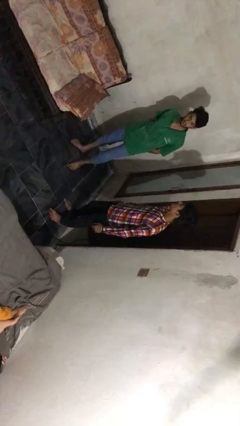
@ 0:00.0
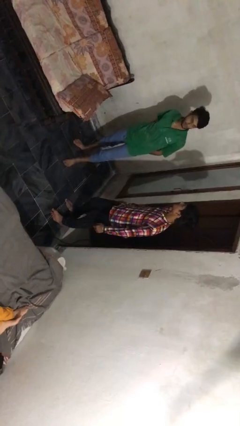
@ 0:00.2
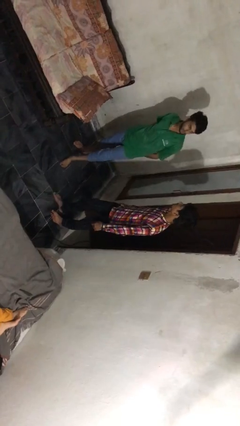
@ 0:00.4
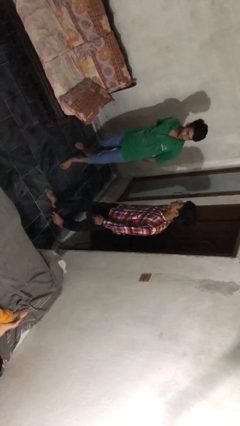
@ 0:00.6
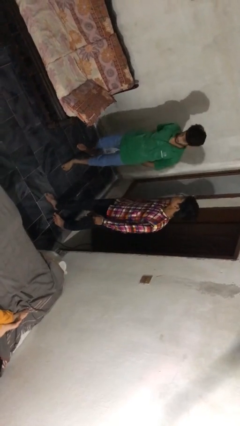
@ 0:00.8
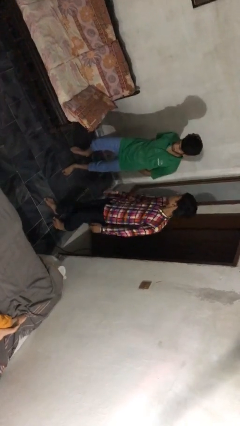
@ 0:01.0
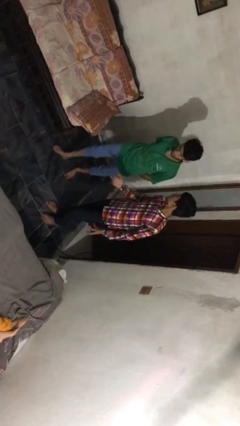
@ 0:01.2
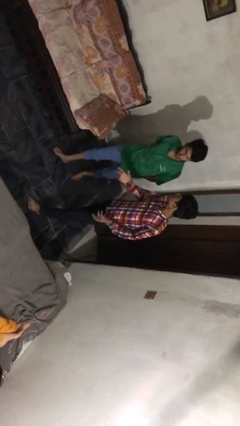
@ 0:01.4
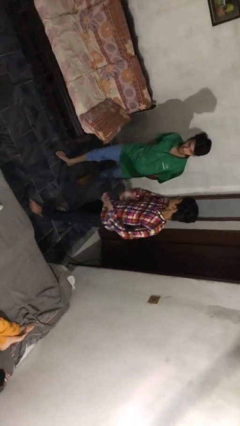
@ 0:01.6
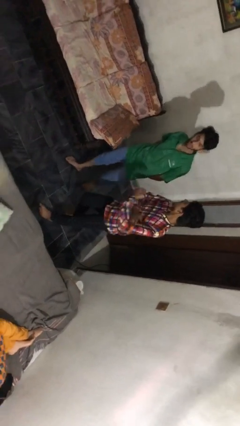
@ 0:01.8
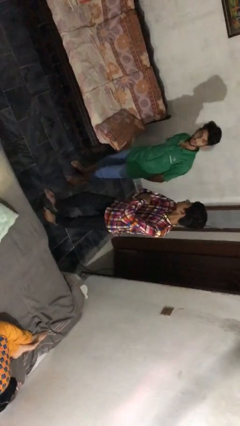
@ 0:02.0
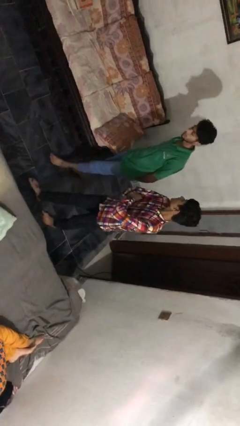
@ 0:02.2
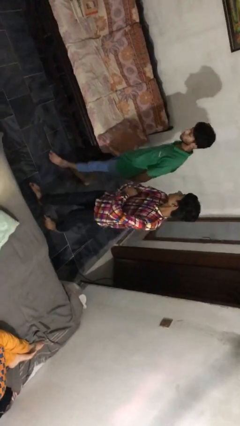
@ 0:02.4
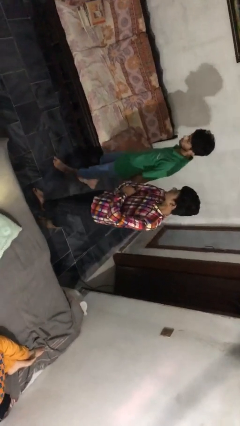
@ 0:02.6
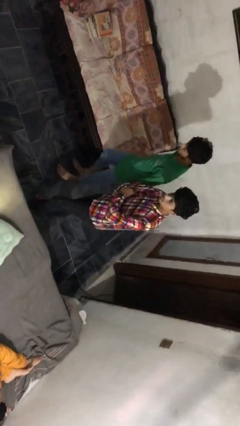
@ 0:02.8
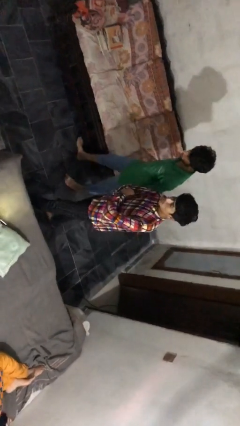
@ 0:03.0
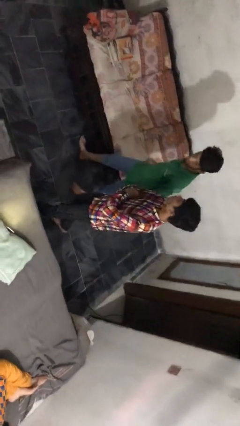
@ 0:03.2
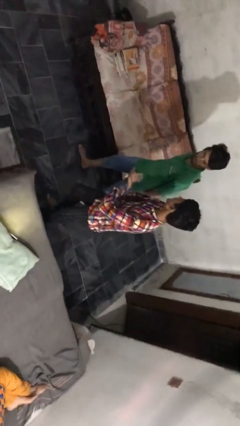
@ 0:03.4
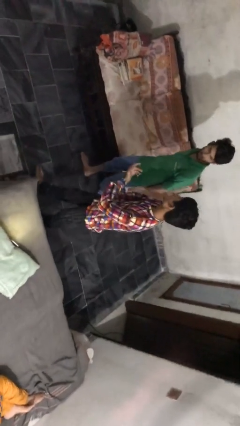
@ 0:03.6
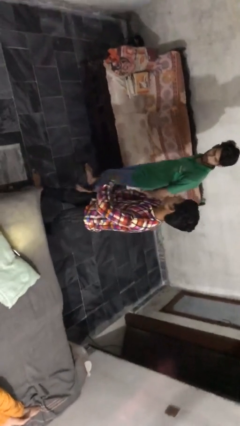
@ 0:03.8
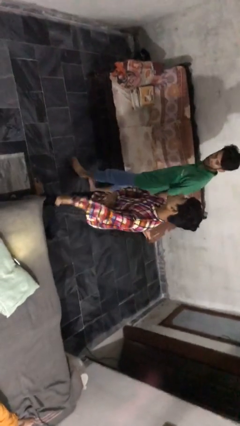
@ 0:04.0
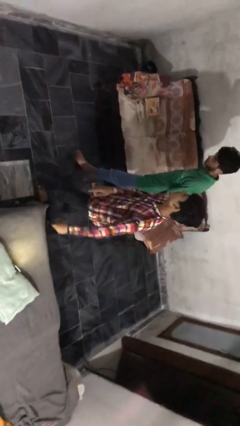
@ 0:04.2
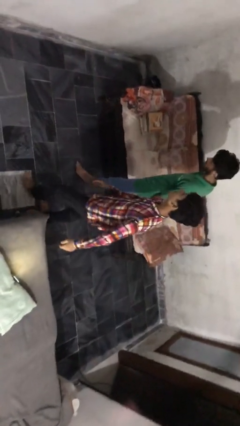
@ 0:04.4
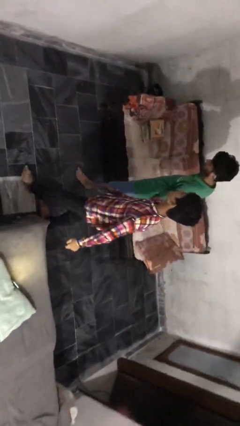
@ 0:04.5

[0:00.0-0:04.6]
person talks to person

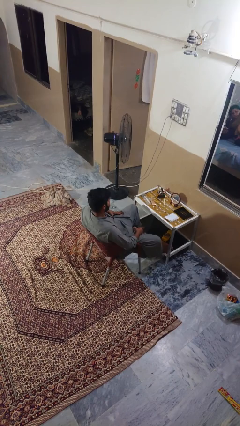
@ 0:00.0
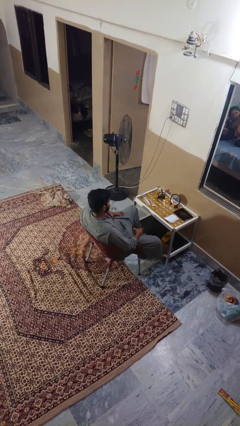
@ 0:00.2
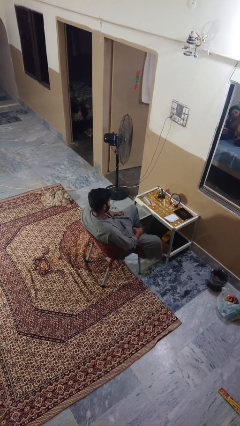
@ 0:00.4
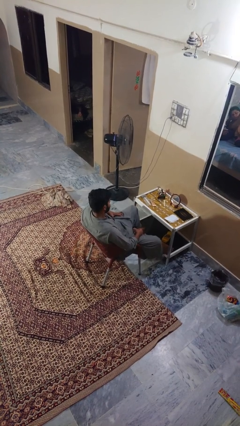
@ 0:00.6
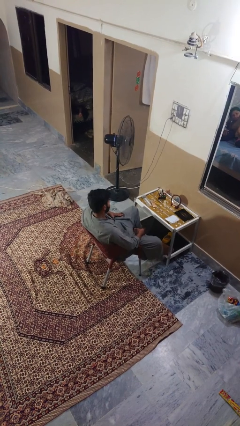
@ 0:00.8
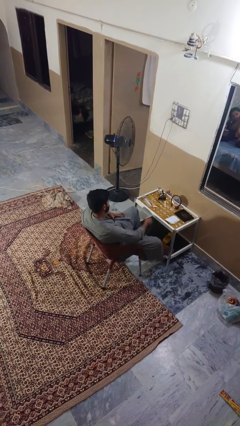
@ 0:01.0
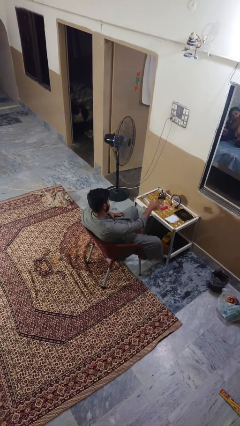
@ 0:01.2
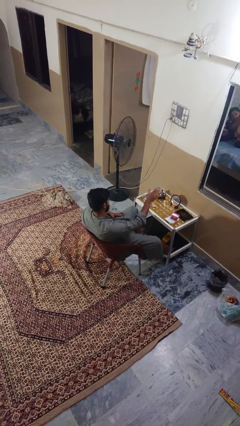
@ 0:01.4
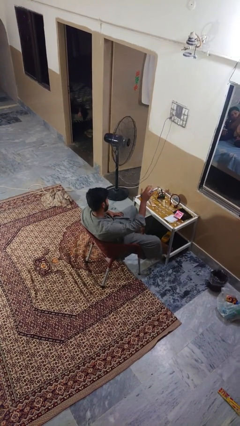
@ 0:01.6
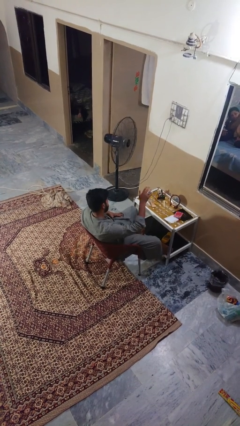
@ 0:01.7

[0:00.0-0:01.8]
person throws object on table

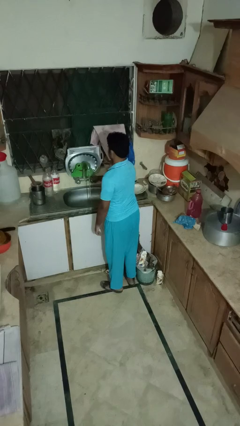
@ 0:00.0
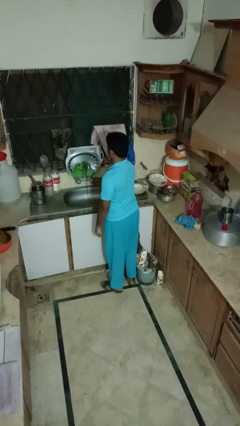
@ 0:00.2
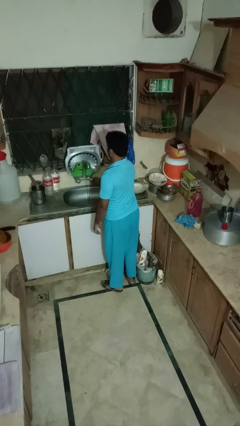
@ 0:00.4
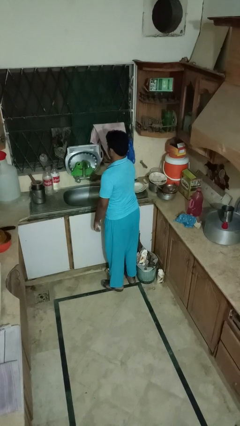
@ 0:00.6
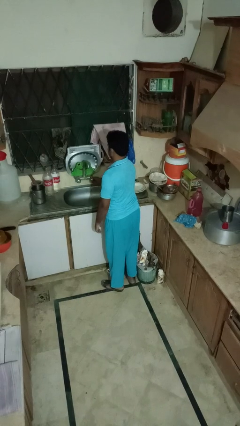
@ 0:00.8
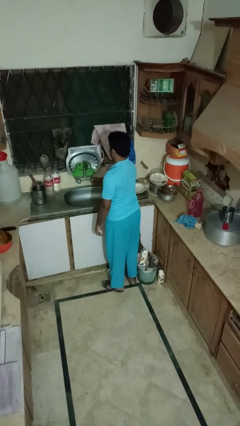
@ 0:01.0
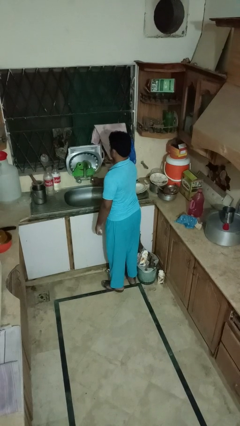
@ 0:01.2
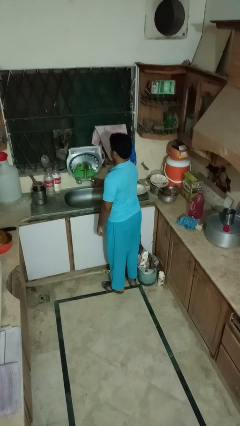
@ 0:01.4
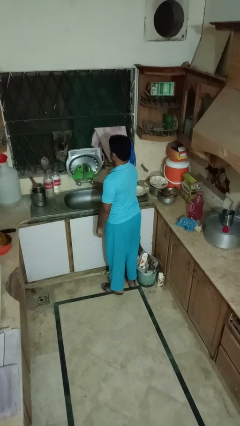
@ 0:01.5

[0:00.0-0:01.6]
person turns off faucet

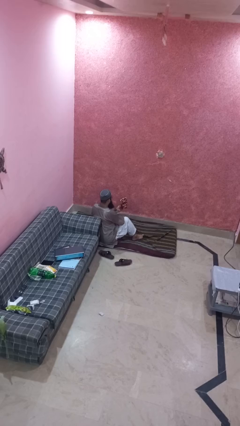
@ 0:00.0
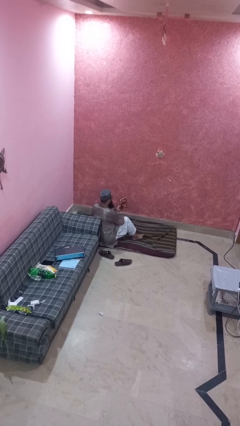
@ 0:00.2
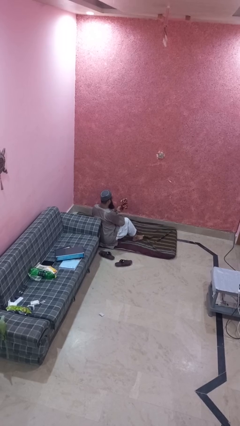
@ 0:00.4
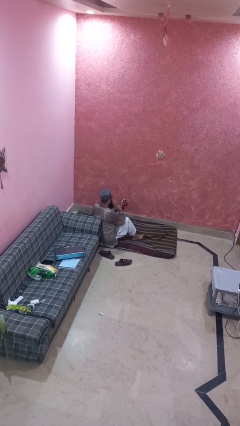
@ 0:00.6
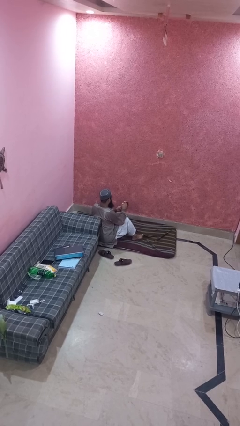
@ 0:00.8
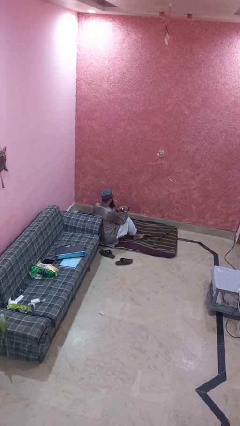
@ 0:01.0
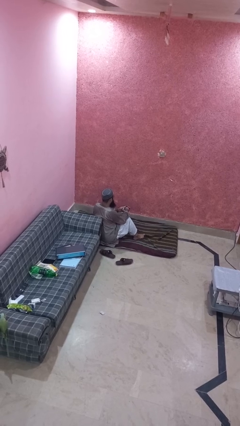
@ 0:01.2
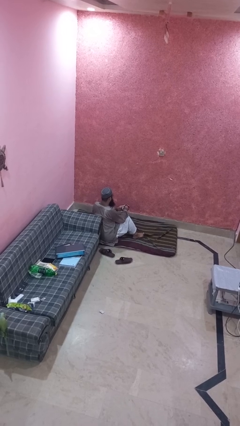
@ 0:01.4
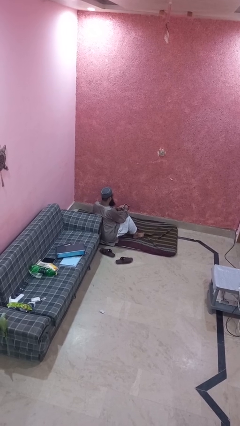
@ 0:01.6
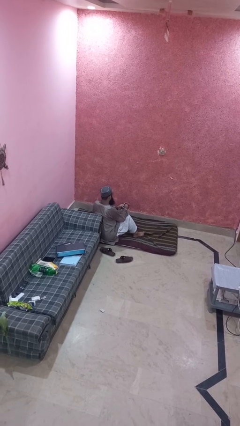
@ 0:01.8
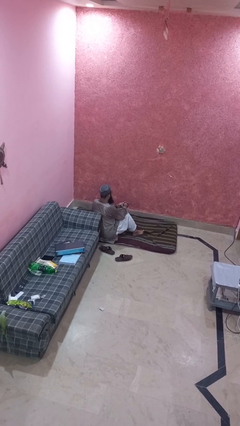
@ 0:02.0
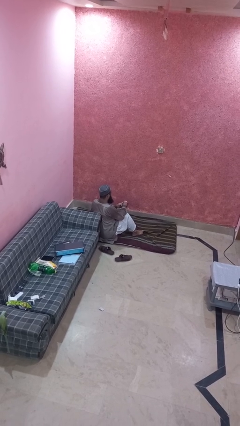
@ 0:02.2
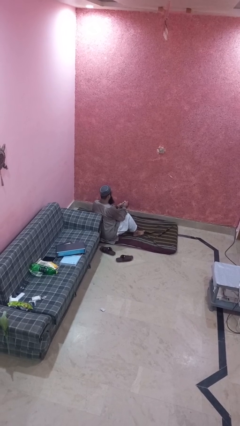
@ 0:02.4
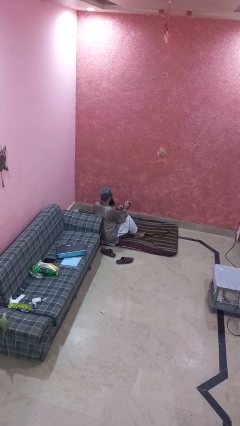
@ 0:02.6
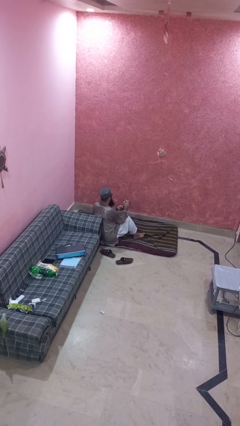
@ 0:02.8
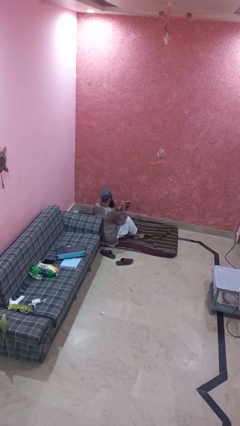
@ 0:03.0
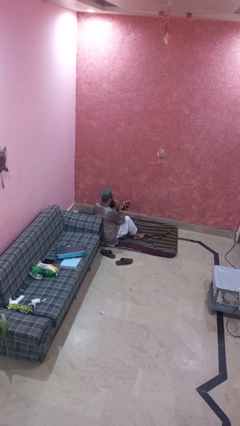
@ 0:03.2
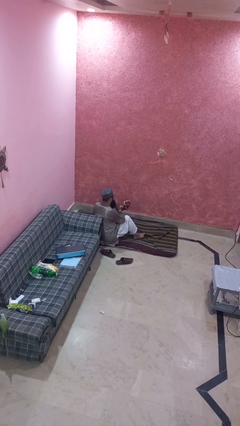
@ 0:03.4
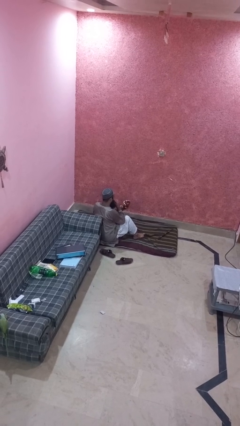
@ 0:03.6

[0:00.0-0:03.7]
person eats snack from bag

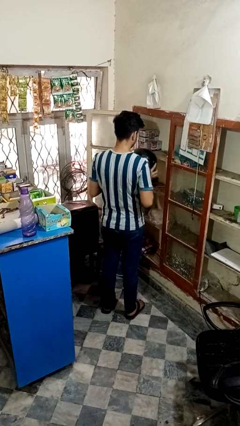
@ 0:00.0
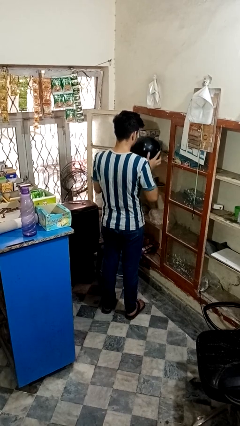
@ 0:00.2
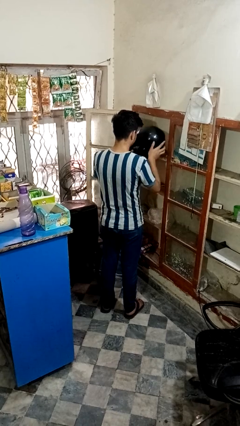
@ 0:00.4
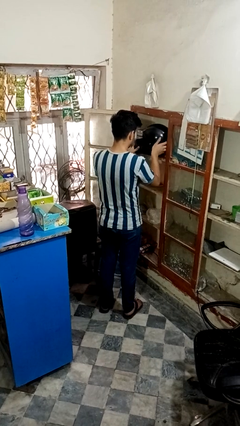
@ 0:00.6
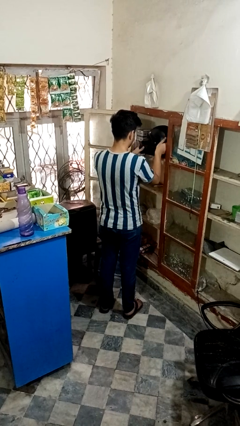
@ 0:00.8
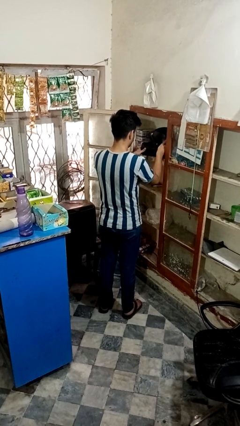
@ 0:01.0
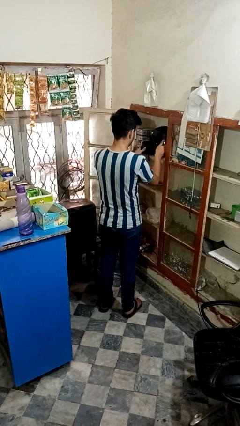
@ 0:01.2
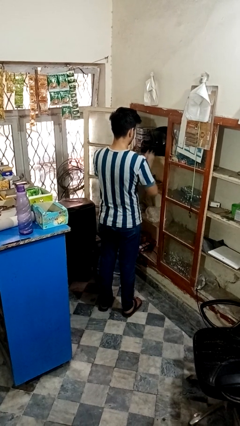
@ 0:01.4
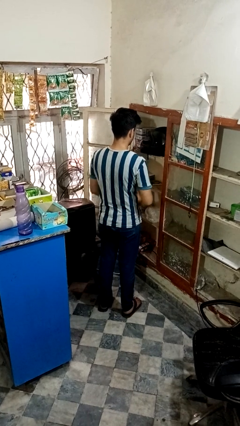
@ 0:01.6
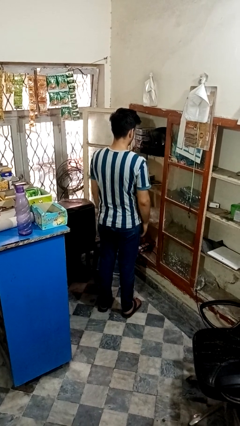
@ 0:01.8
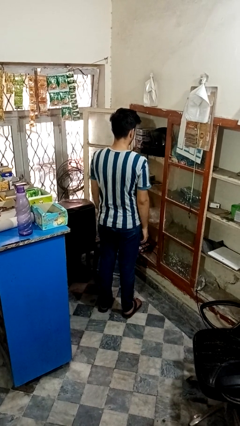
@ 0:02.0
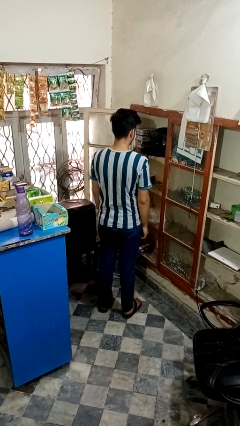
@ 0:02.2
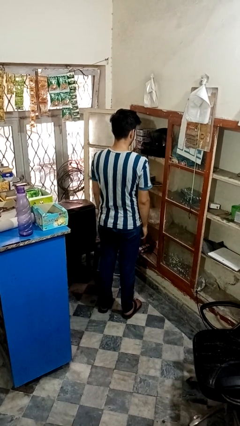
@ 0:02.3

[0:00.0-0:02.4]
person puts down object on shelf

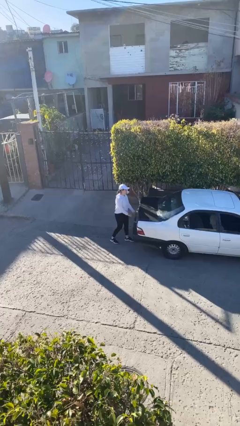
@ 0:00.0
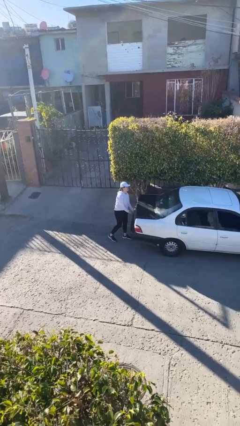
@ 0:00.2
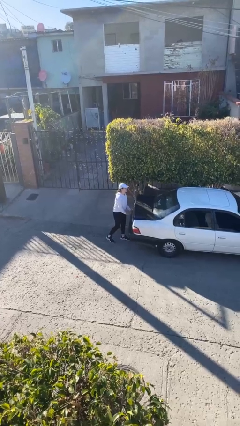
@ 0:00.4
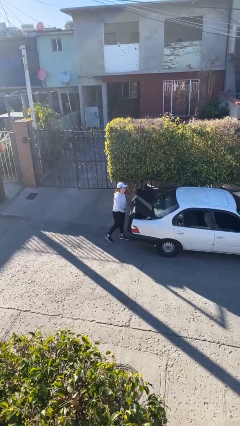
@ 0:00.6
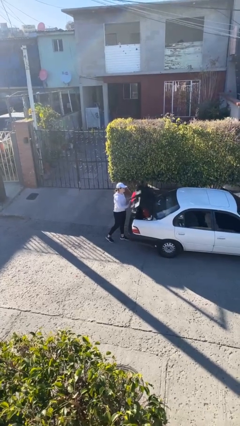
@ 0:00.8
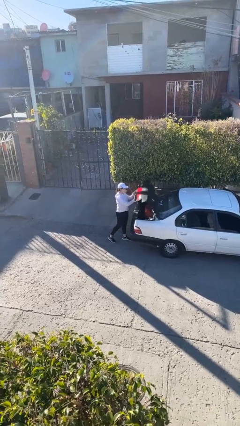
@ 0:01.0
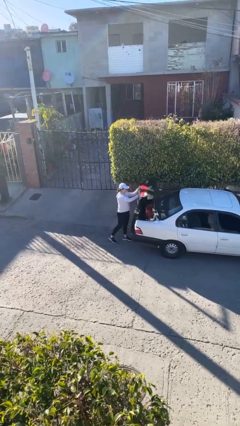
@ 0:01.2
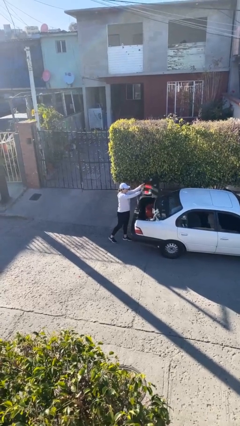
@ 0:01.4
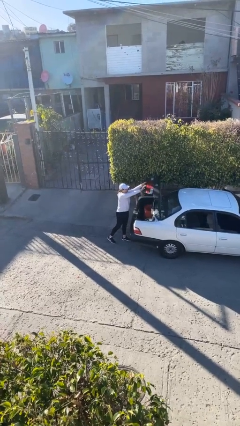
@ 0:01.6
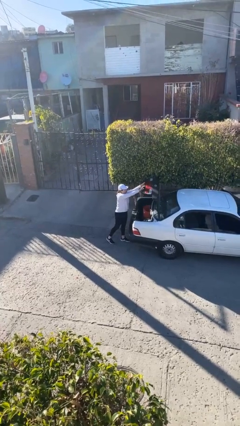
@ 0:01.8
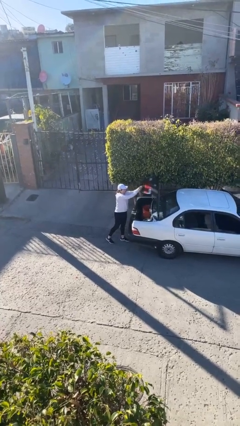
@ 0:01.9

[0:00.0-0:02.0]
person opens car trunk

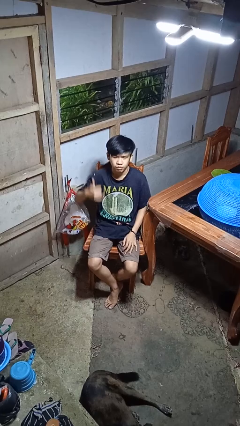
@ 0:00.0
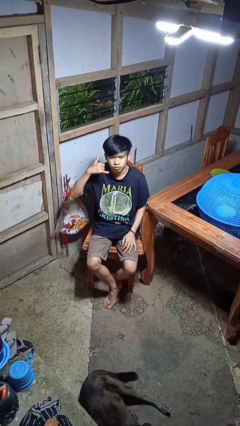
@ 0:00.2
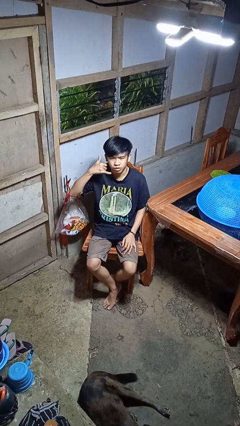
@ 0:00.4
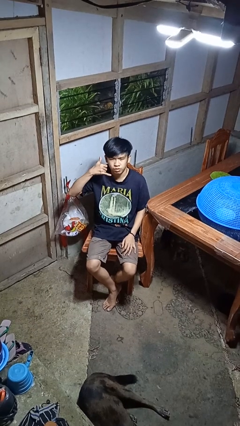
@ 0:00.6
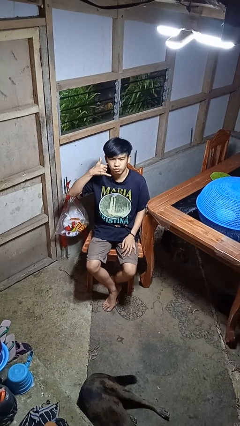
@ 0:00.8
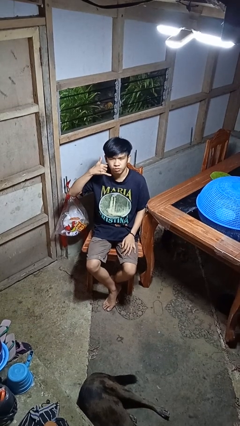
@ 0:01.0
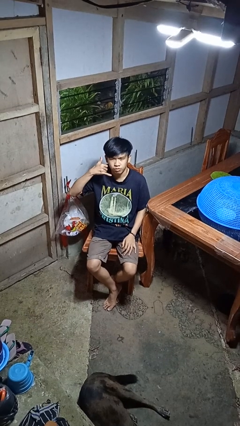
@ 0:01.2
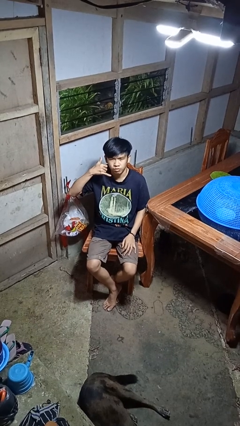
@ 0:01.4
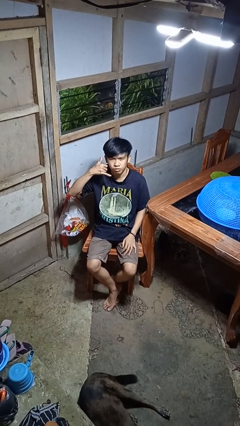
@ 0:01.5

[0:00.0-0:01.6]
person gestures call me
